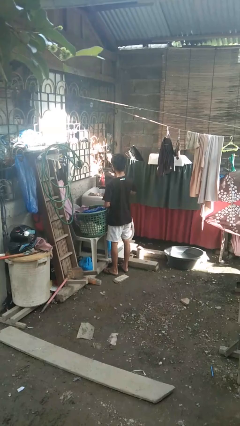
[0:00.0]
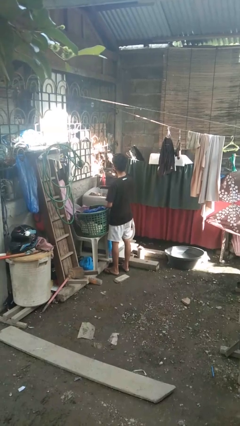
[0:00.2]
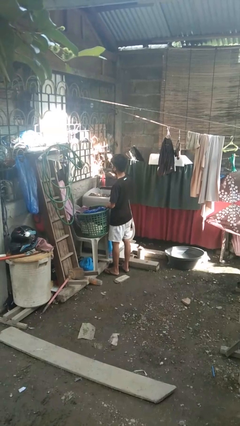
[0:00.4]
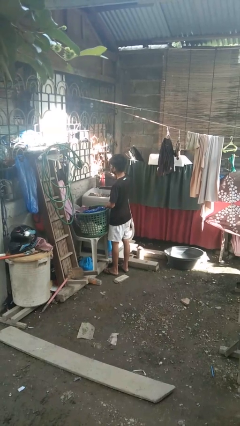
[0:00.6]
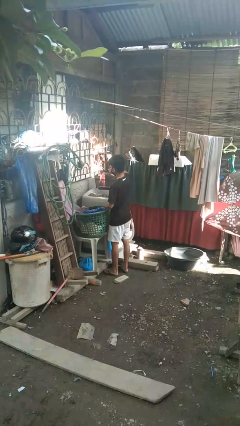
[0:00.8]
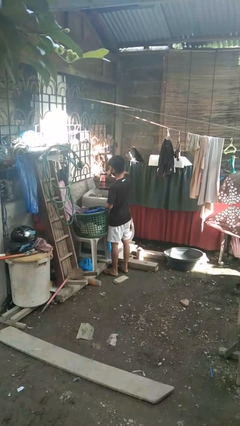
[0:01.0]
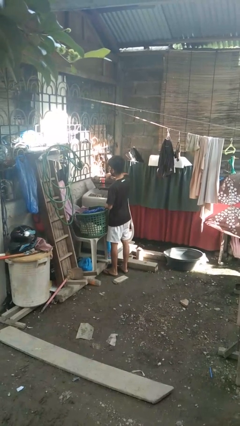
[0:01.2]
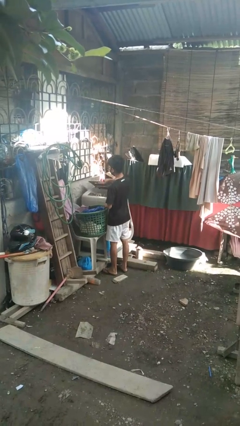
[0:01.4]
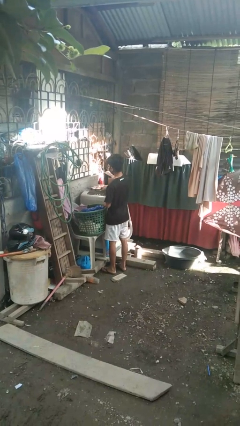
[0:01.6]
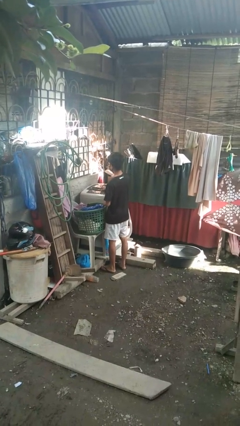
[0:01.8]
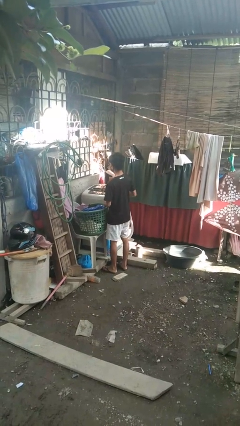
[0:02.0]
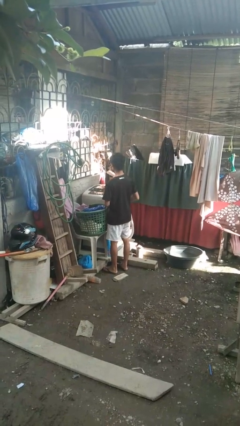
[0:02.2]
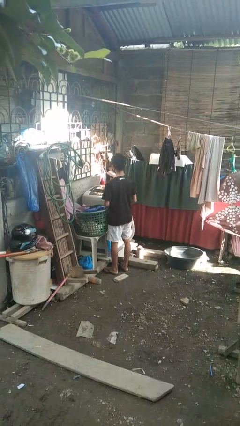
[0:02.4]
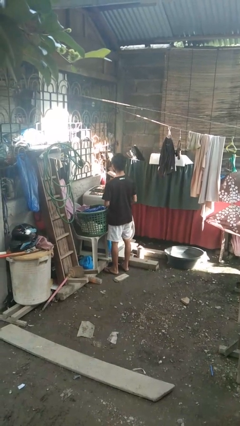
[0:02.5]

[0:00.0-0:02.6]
person closes clothes washer

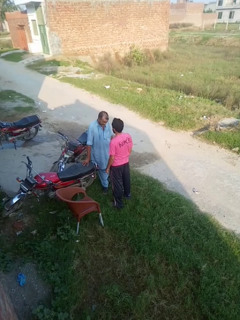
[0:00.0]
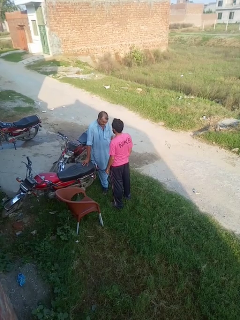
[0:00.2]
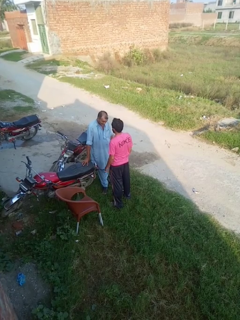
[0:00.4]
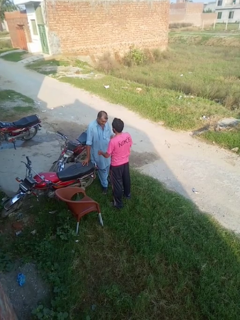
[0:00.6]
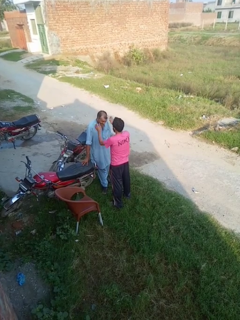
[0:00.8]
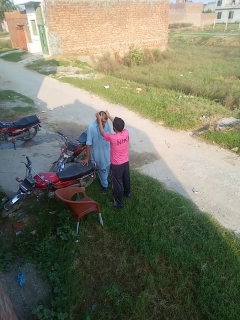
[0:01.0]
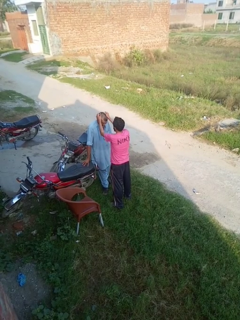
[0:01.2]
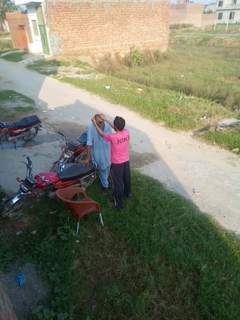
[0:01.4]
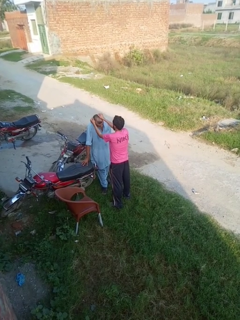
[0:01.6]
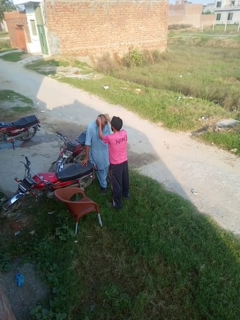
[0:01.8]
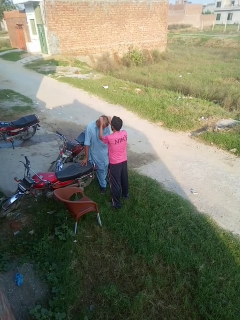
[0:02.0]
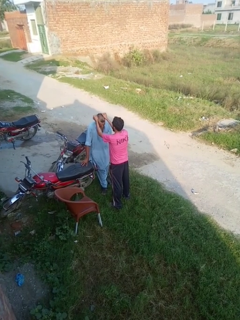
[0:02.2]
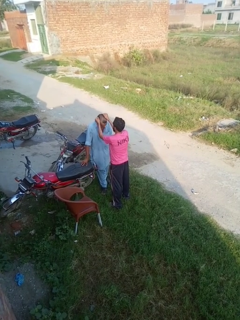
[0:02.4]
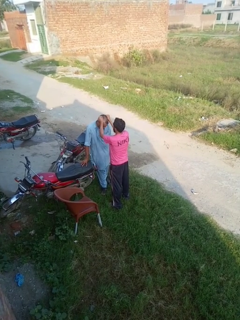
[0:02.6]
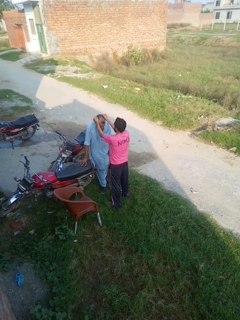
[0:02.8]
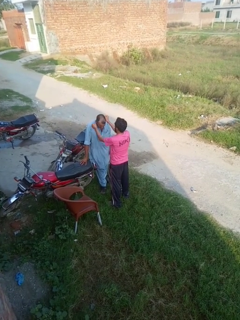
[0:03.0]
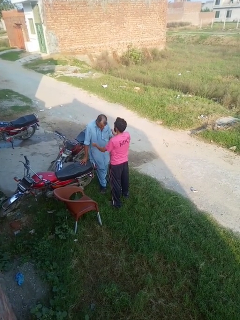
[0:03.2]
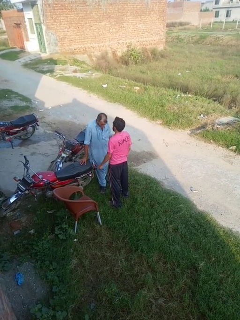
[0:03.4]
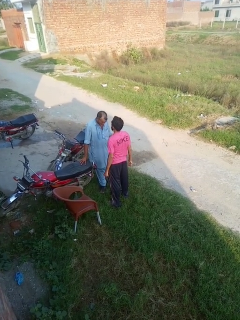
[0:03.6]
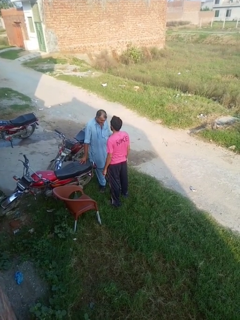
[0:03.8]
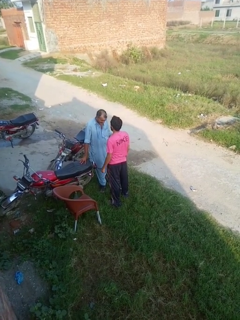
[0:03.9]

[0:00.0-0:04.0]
person grabs person by hair

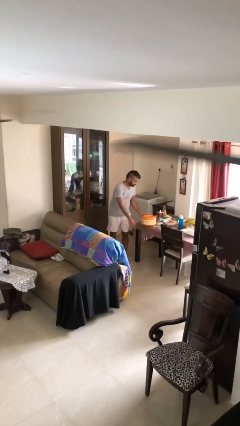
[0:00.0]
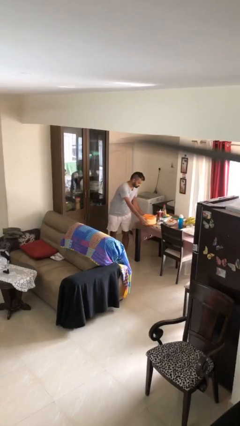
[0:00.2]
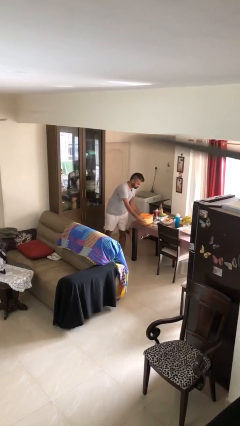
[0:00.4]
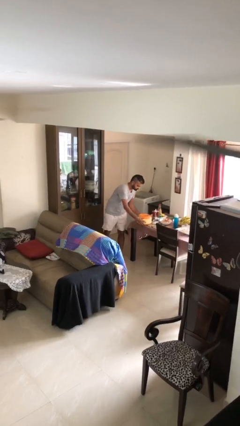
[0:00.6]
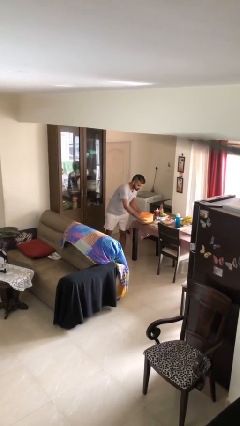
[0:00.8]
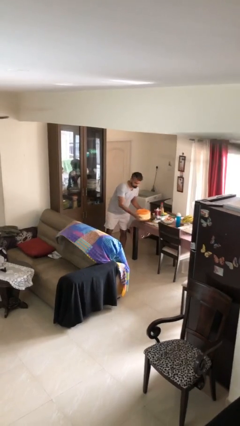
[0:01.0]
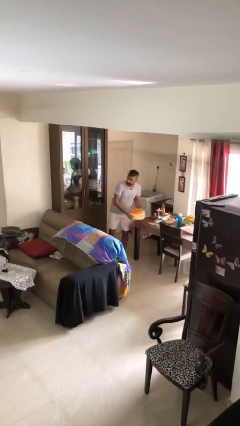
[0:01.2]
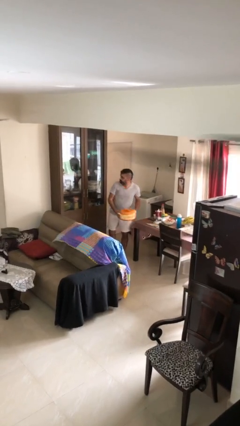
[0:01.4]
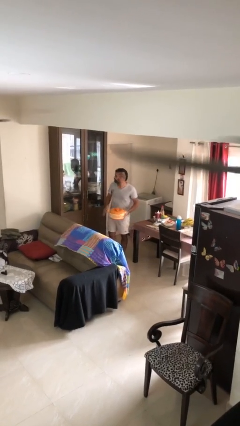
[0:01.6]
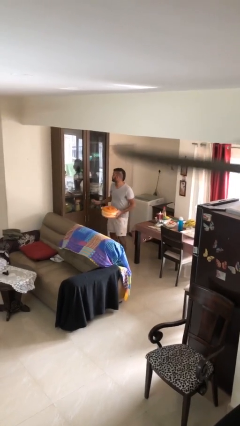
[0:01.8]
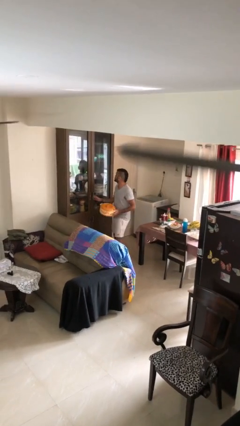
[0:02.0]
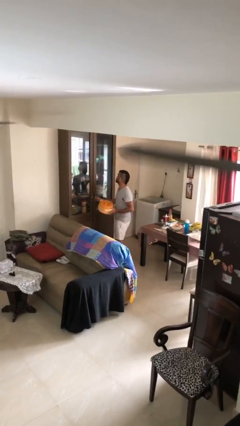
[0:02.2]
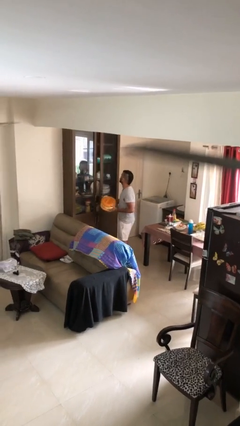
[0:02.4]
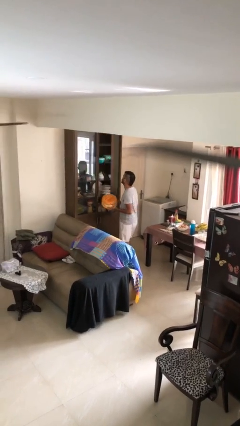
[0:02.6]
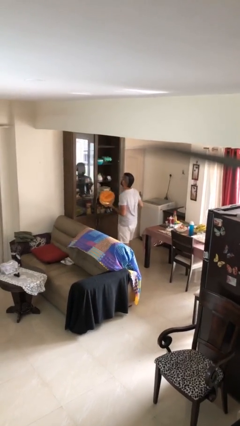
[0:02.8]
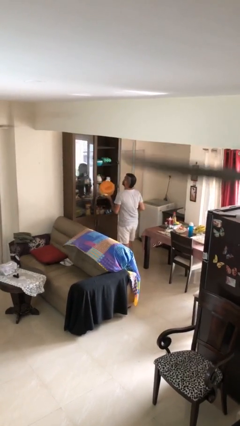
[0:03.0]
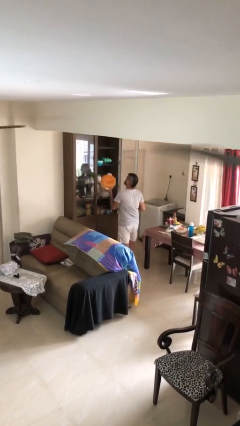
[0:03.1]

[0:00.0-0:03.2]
person picks up object from table

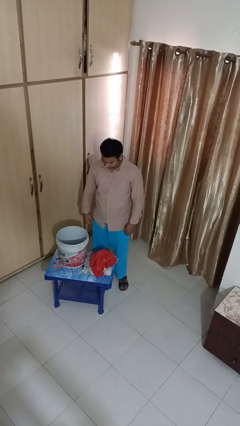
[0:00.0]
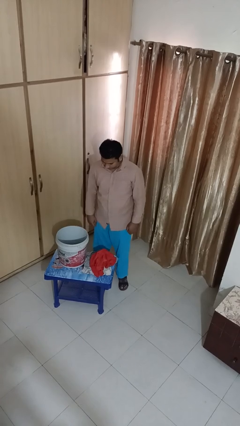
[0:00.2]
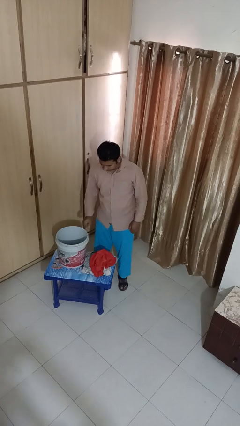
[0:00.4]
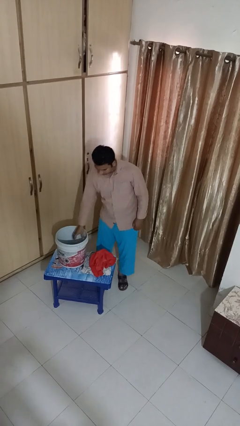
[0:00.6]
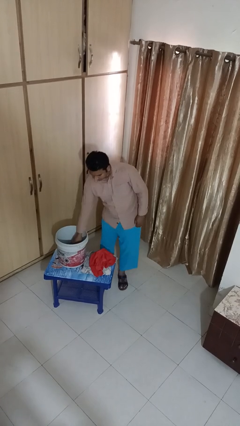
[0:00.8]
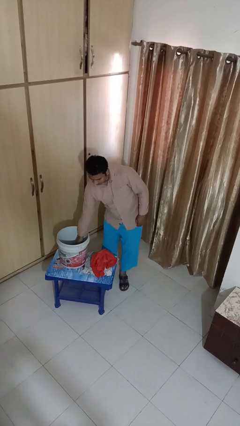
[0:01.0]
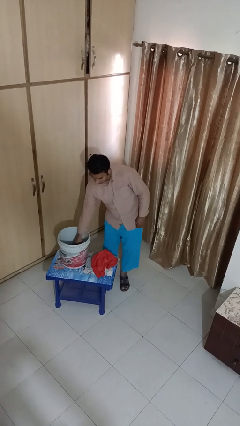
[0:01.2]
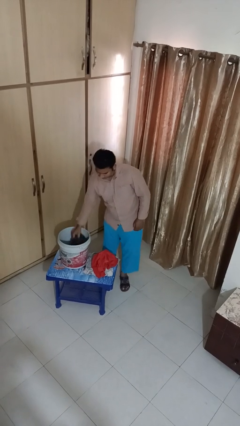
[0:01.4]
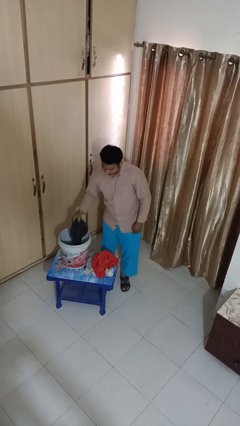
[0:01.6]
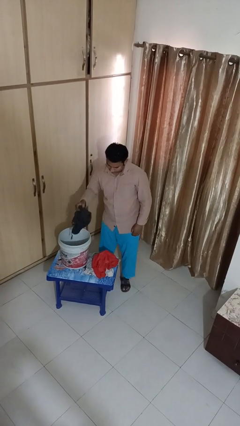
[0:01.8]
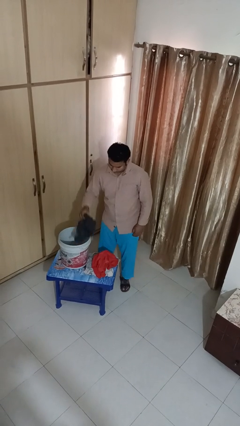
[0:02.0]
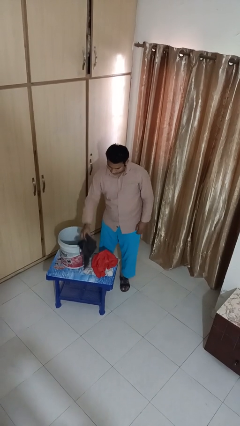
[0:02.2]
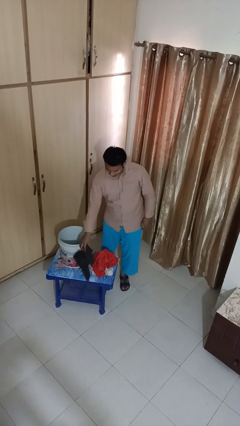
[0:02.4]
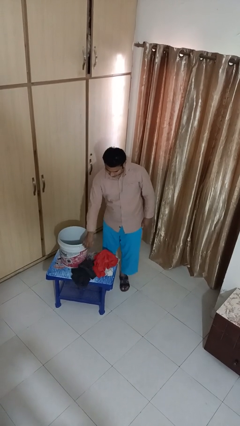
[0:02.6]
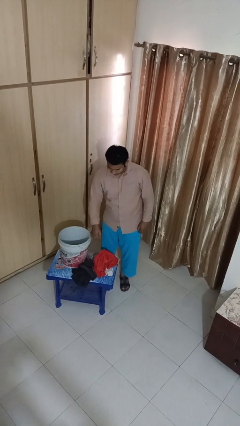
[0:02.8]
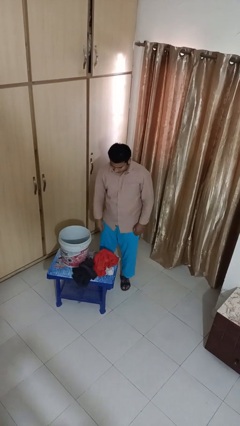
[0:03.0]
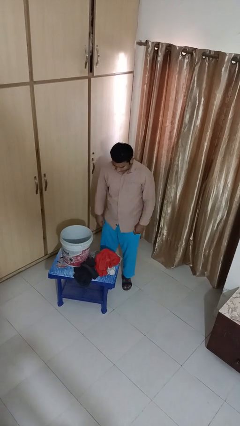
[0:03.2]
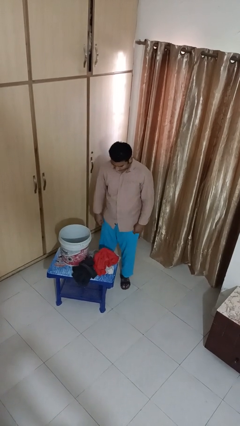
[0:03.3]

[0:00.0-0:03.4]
person takes object from basket

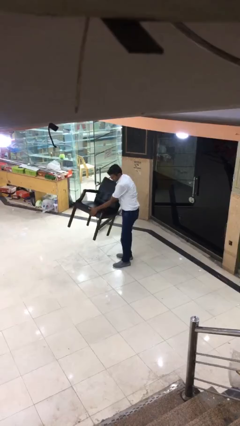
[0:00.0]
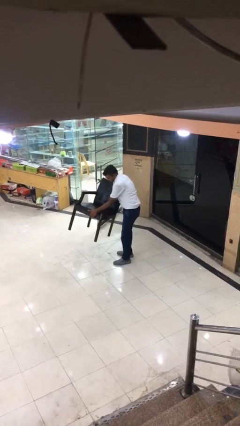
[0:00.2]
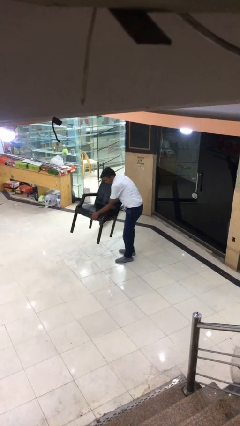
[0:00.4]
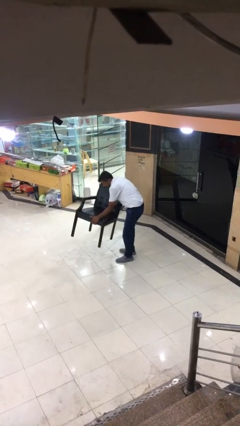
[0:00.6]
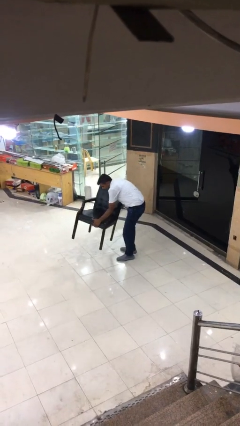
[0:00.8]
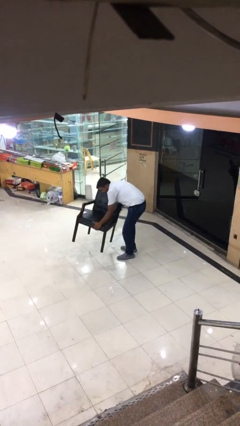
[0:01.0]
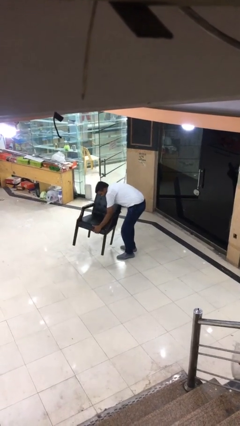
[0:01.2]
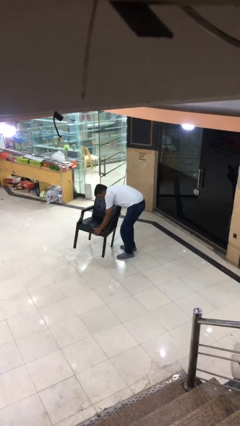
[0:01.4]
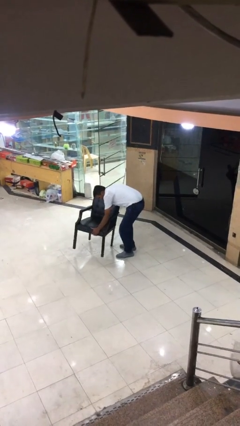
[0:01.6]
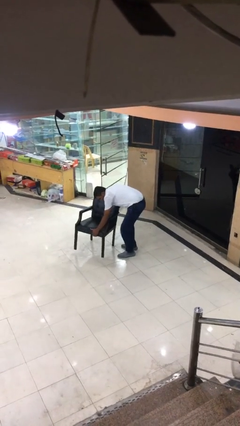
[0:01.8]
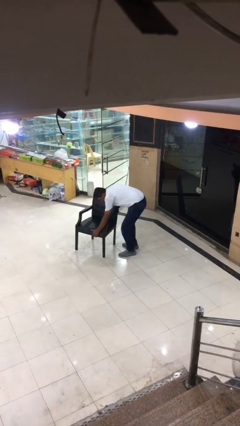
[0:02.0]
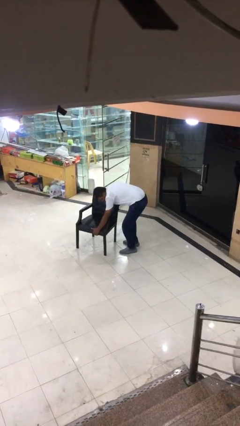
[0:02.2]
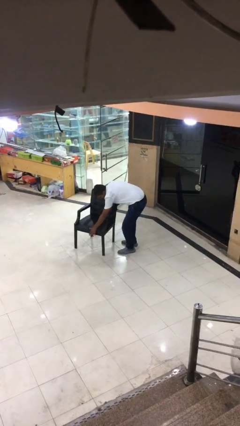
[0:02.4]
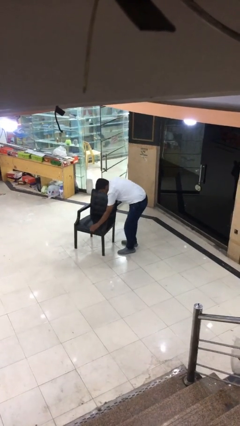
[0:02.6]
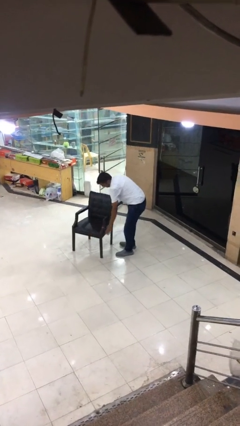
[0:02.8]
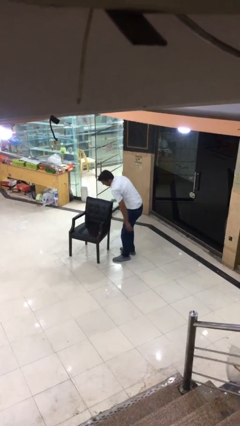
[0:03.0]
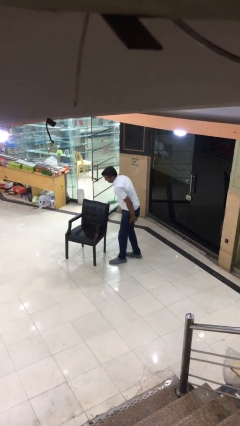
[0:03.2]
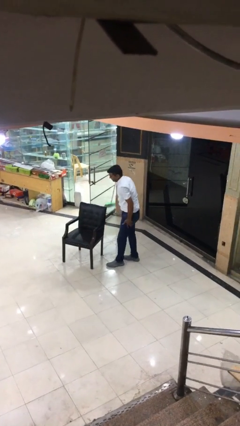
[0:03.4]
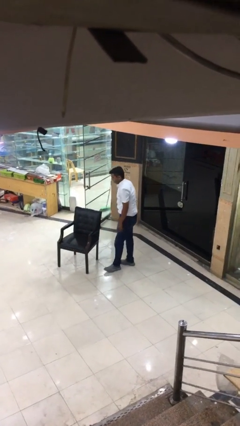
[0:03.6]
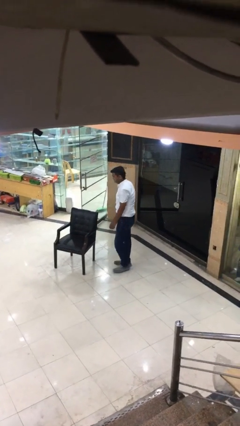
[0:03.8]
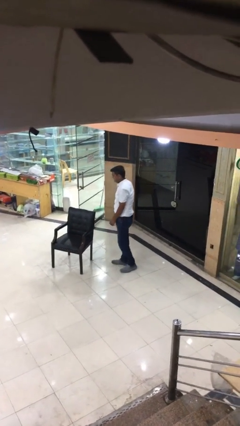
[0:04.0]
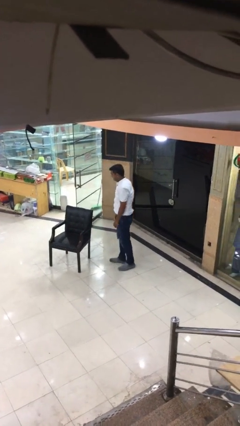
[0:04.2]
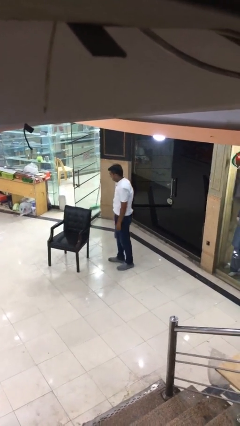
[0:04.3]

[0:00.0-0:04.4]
person puts down object on floor

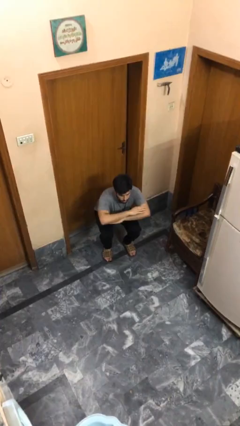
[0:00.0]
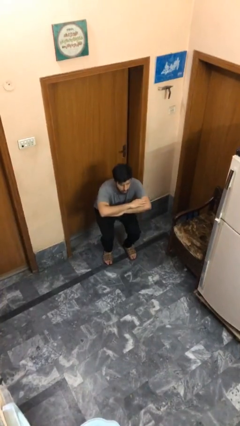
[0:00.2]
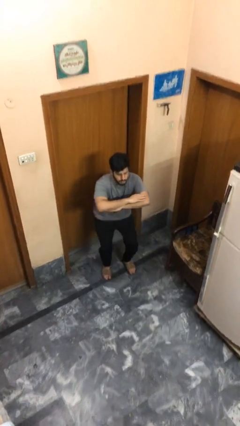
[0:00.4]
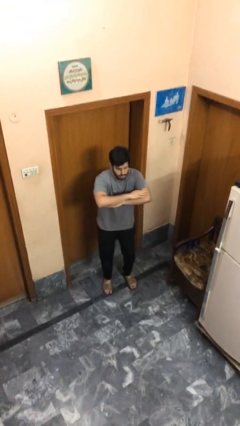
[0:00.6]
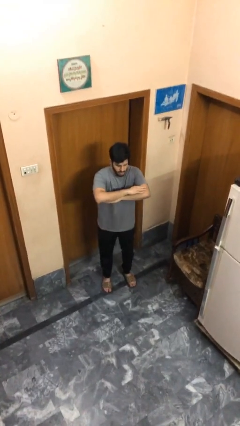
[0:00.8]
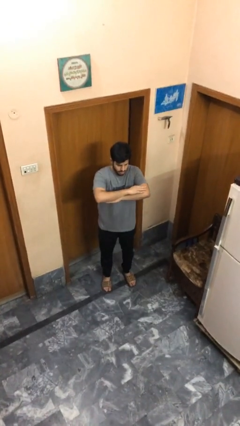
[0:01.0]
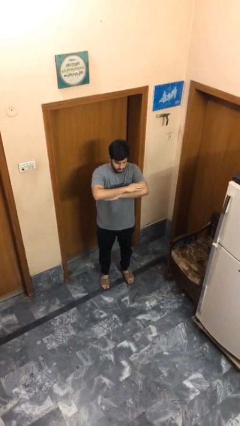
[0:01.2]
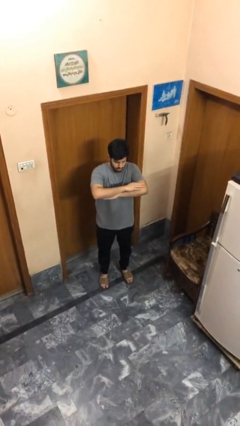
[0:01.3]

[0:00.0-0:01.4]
person stands up
